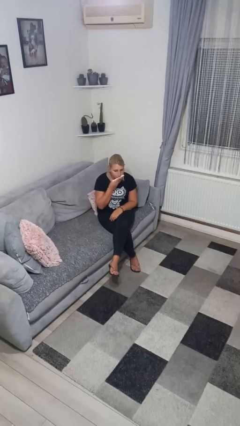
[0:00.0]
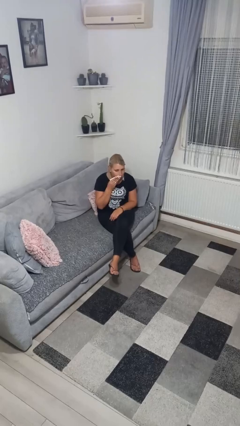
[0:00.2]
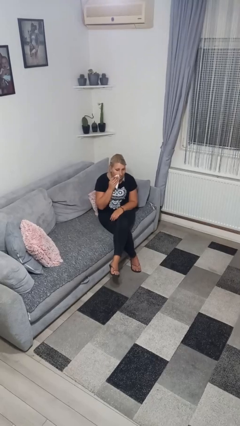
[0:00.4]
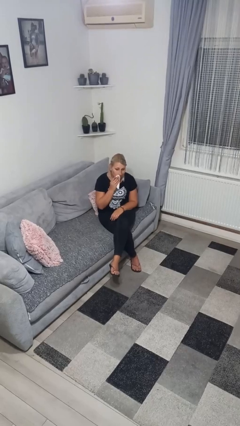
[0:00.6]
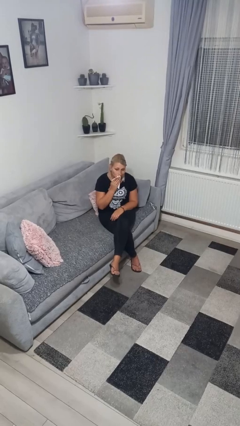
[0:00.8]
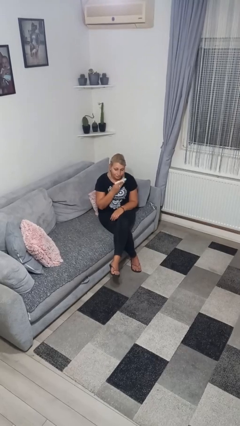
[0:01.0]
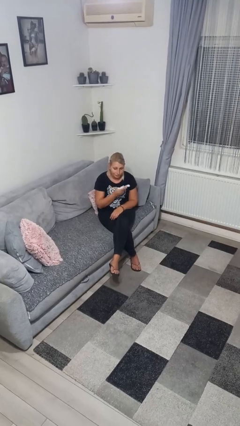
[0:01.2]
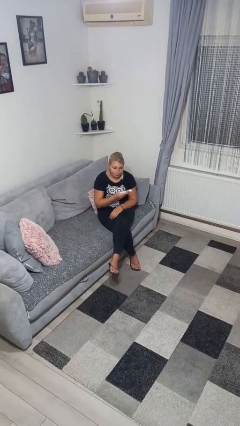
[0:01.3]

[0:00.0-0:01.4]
person wipes mouth with napkin

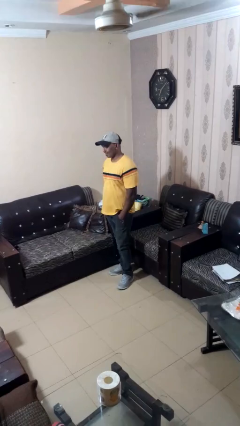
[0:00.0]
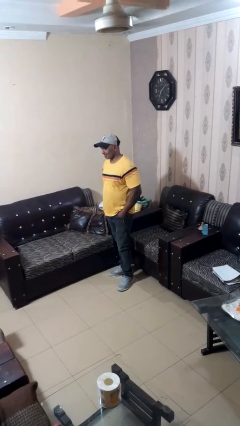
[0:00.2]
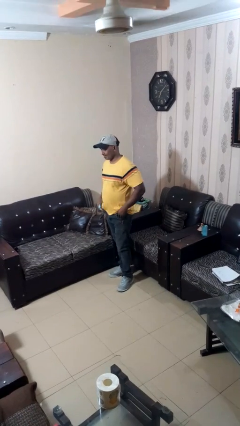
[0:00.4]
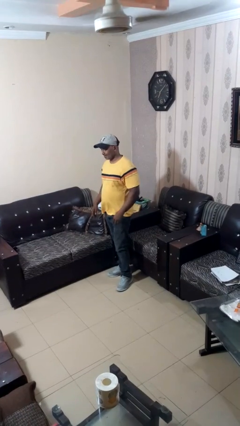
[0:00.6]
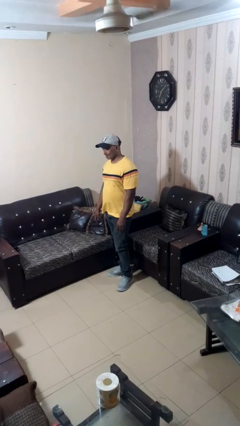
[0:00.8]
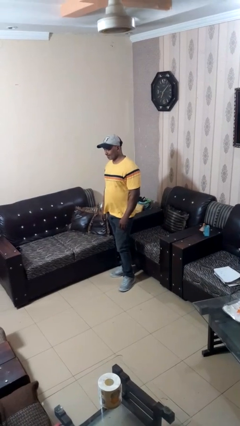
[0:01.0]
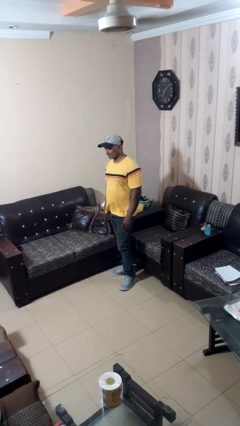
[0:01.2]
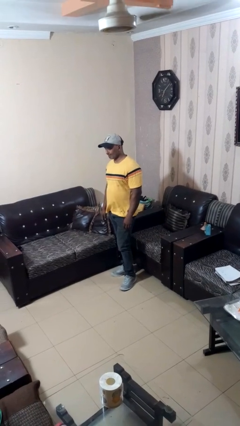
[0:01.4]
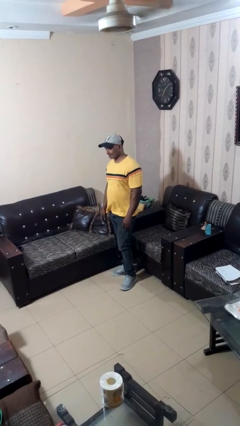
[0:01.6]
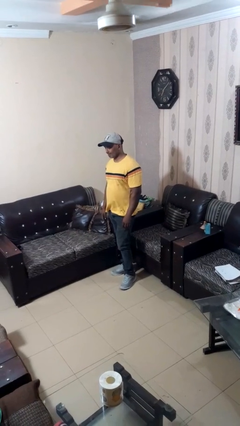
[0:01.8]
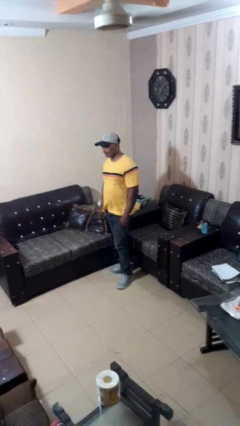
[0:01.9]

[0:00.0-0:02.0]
person puts hands in back pockets

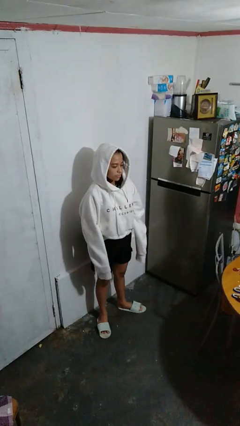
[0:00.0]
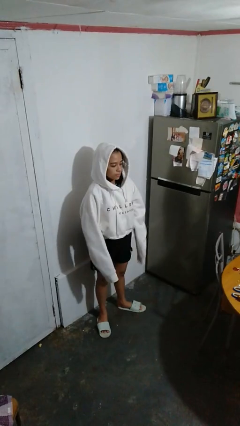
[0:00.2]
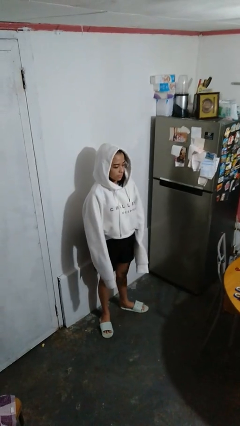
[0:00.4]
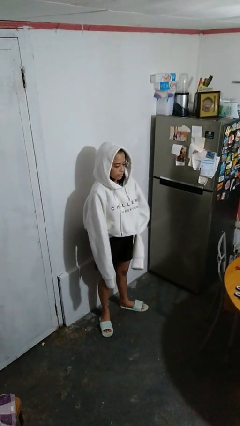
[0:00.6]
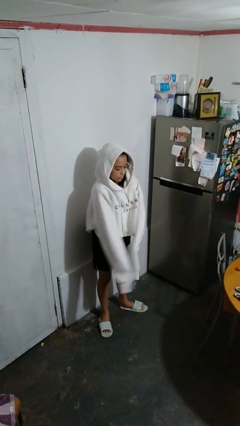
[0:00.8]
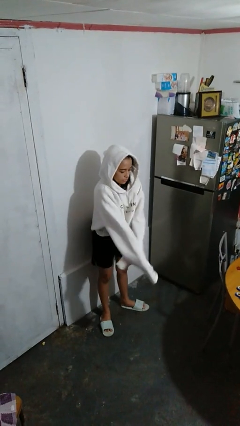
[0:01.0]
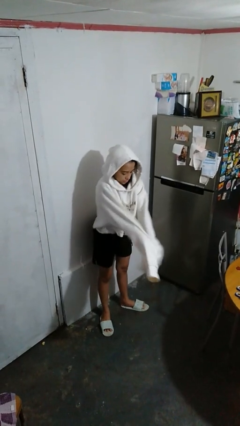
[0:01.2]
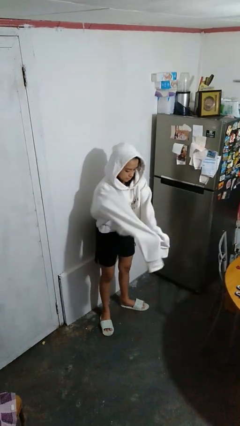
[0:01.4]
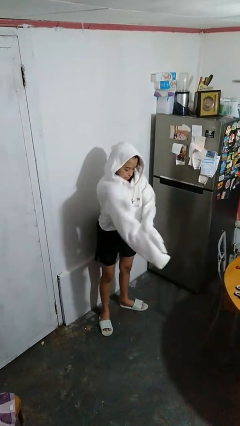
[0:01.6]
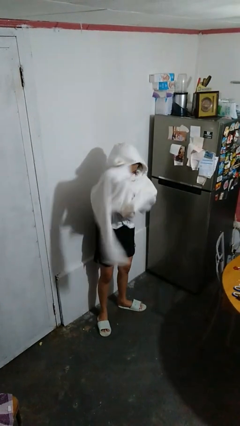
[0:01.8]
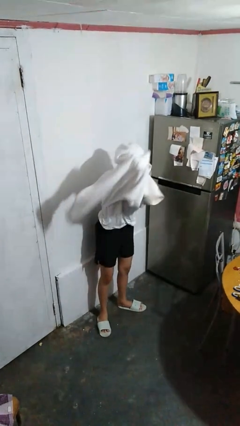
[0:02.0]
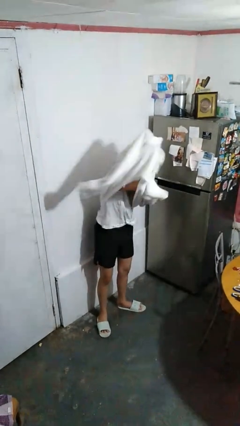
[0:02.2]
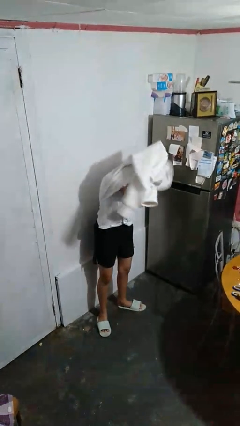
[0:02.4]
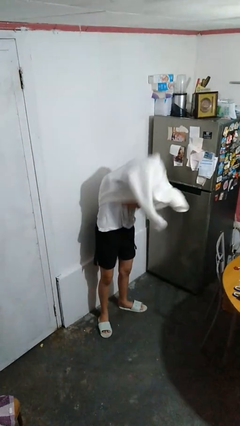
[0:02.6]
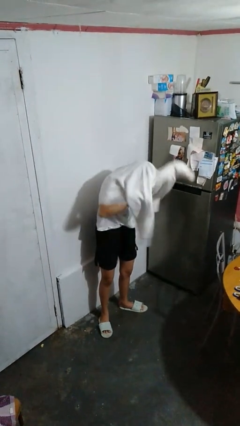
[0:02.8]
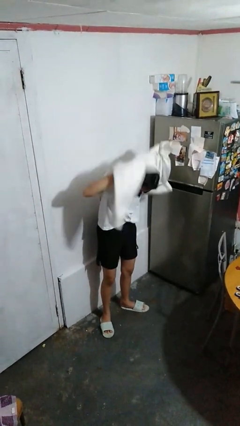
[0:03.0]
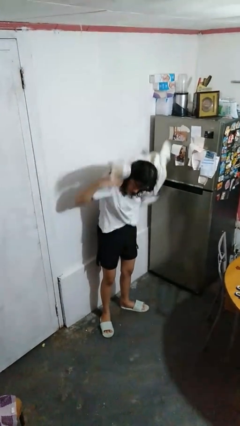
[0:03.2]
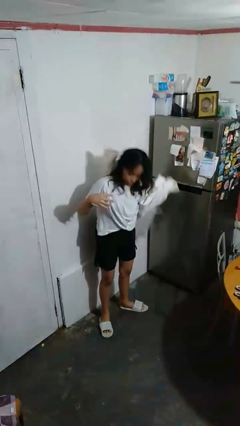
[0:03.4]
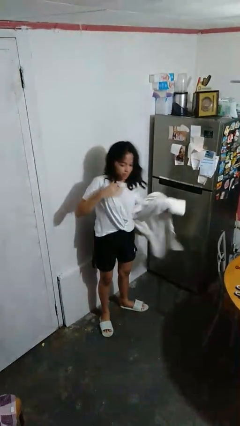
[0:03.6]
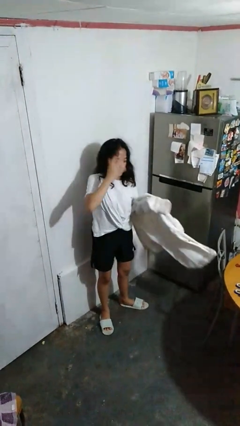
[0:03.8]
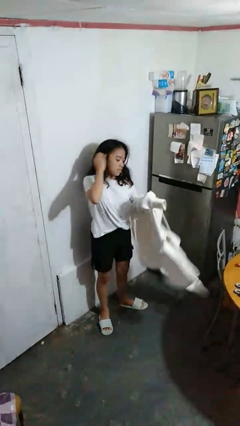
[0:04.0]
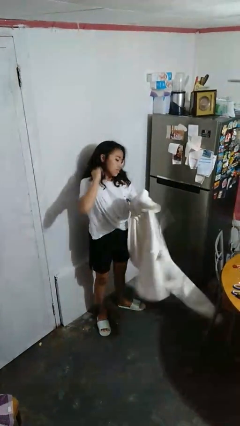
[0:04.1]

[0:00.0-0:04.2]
person takes off hoodie

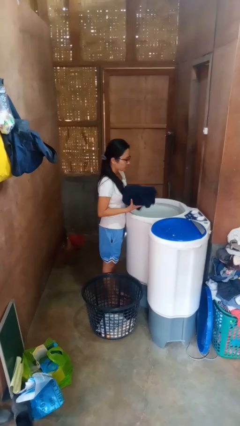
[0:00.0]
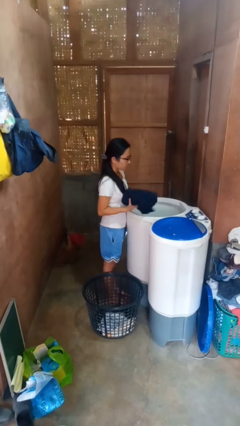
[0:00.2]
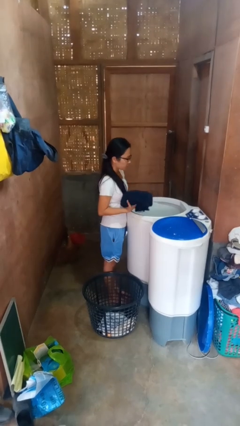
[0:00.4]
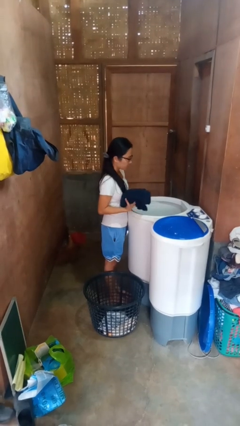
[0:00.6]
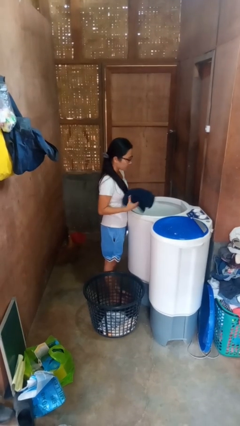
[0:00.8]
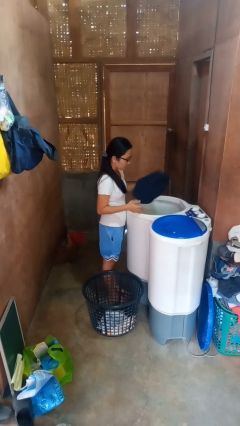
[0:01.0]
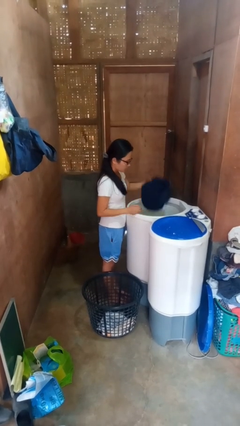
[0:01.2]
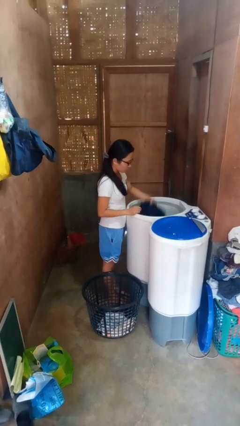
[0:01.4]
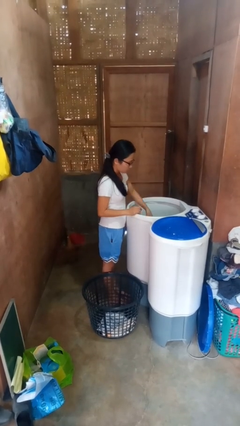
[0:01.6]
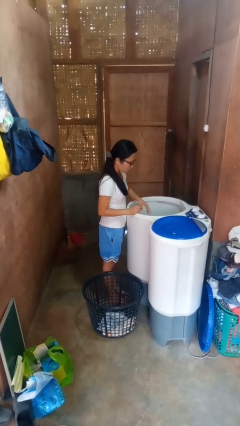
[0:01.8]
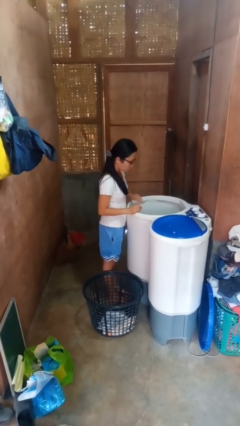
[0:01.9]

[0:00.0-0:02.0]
person loads clotheswasher

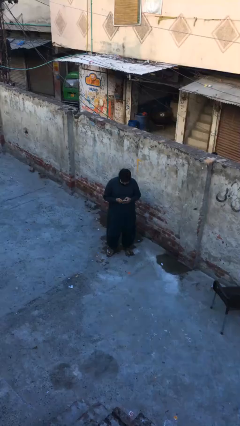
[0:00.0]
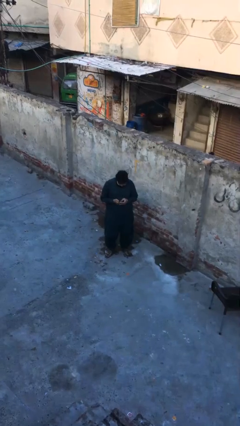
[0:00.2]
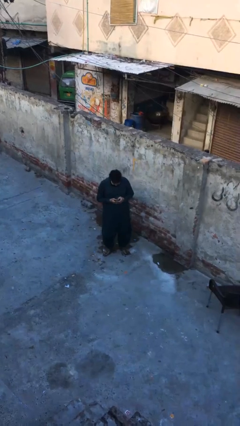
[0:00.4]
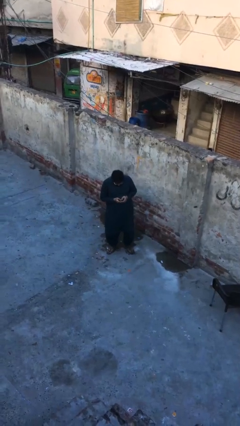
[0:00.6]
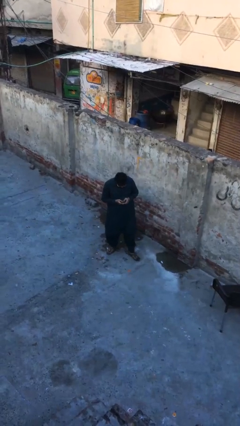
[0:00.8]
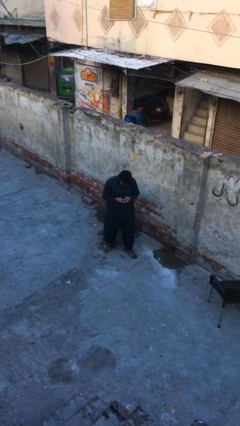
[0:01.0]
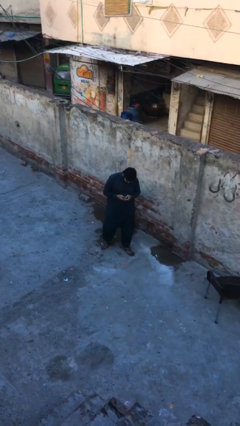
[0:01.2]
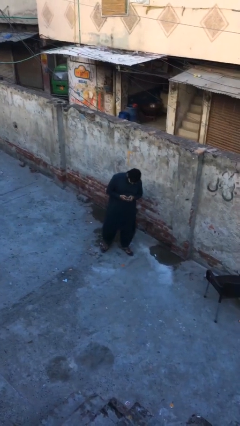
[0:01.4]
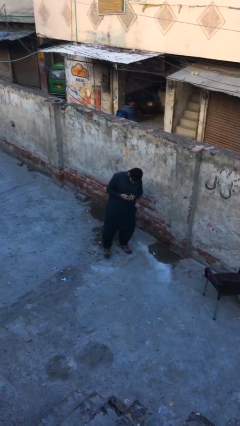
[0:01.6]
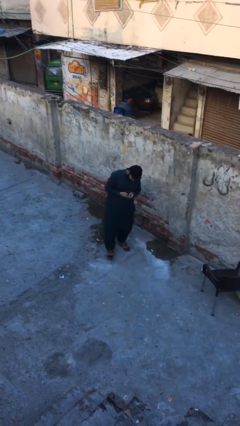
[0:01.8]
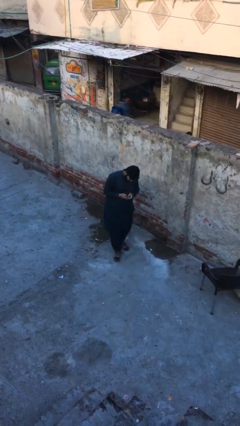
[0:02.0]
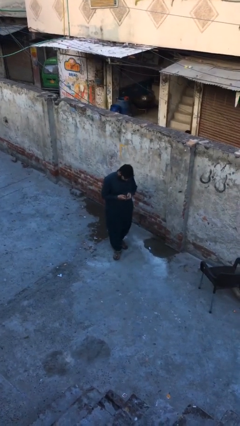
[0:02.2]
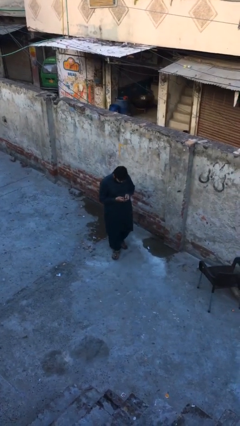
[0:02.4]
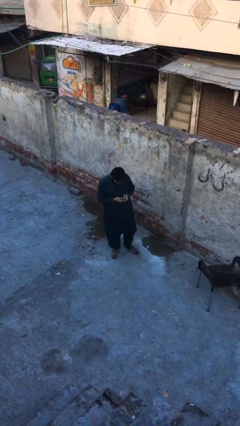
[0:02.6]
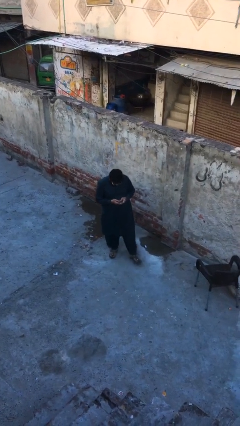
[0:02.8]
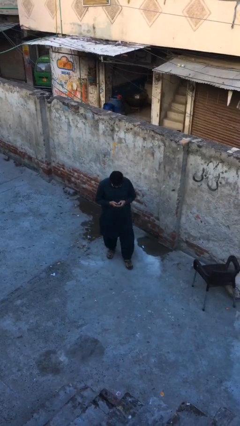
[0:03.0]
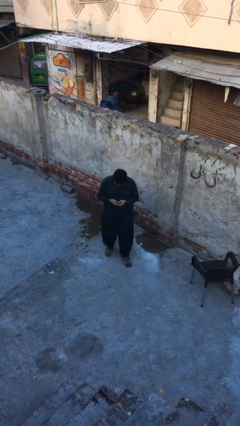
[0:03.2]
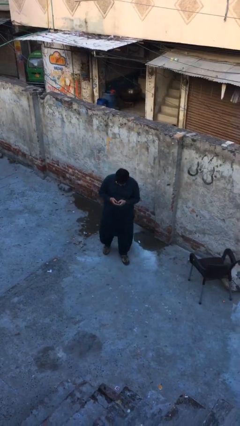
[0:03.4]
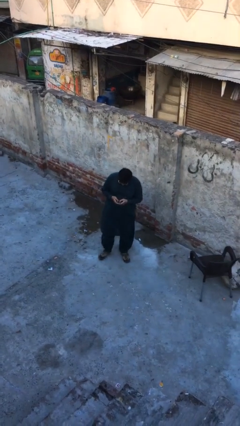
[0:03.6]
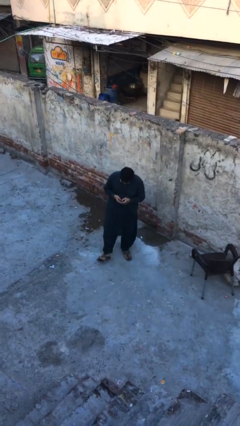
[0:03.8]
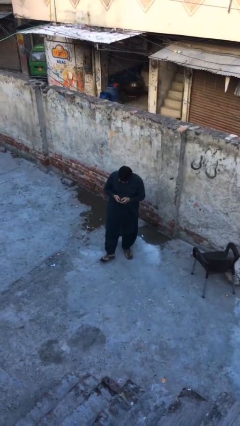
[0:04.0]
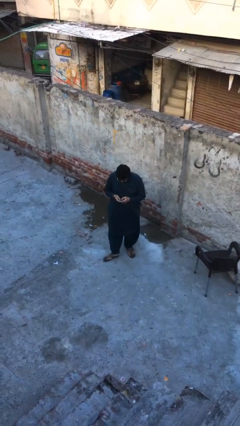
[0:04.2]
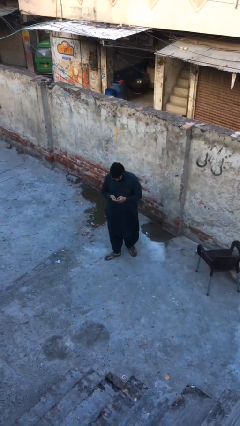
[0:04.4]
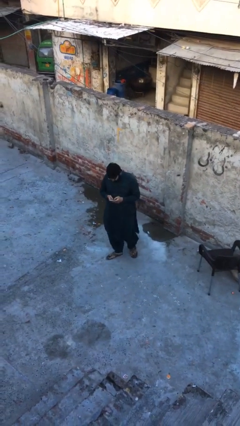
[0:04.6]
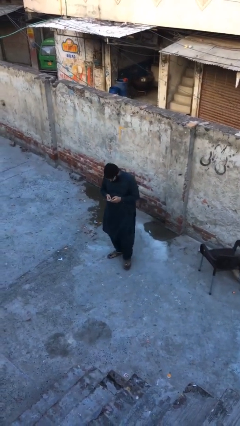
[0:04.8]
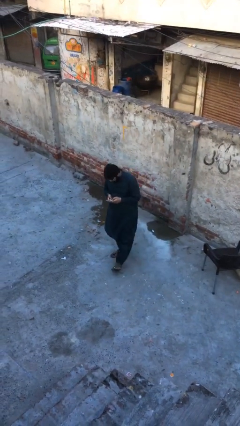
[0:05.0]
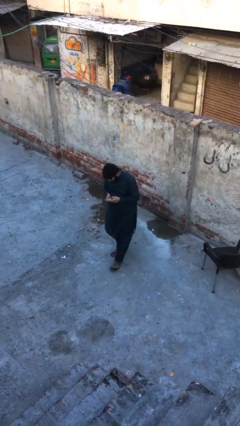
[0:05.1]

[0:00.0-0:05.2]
person texts on phone

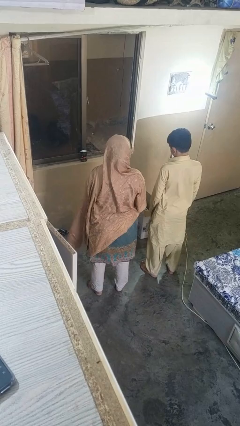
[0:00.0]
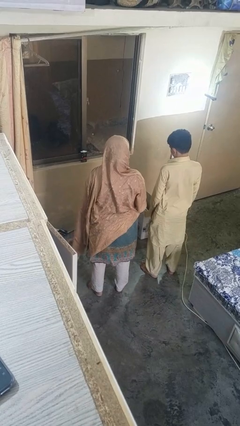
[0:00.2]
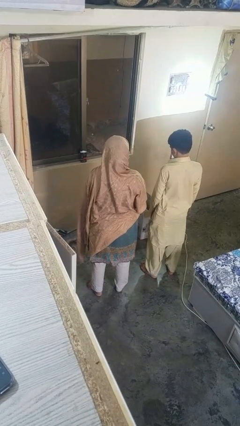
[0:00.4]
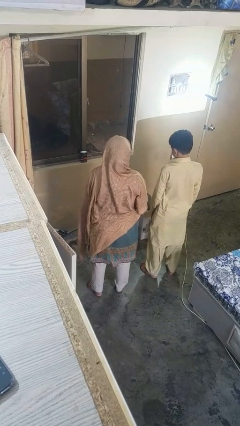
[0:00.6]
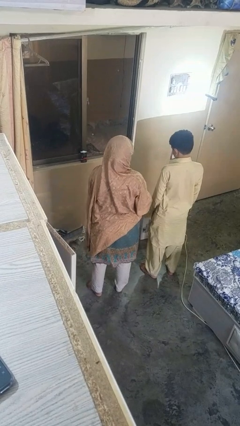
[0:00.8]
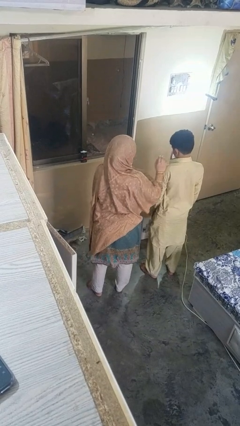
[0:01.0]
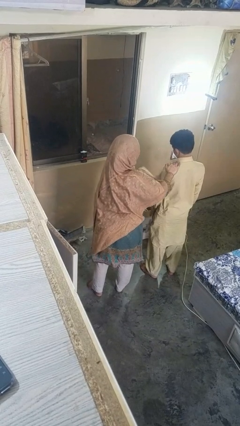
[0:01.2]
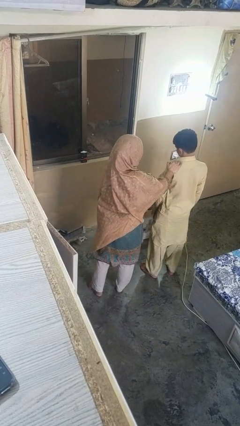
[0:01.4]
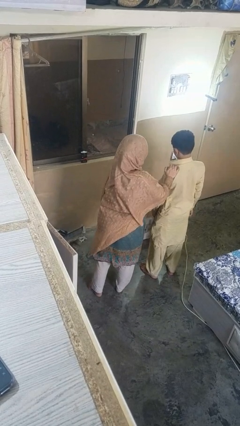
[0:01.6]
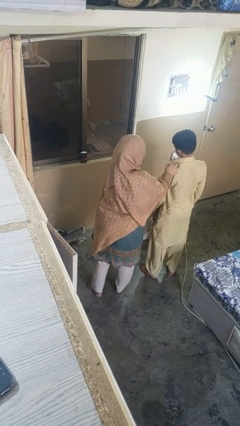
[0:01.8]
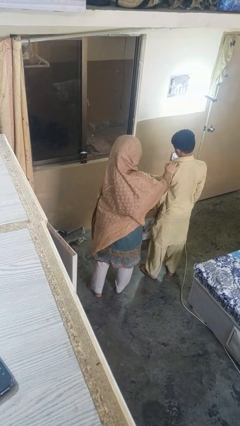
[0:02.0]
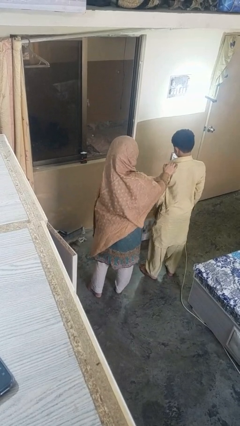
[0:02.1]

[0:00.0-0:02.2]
person shoves person

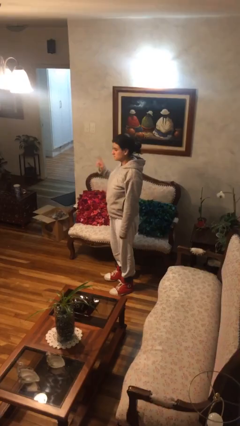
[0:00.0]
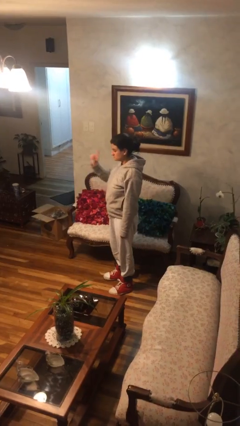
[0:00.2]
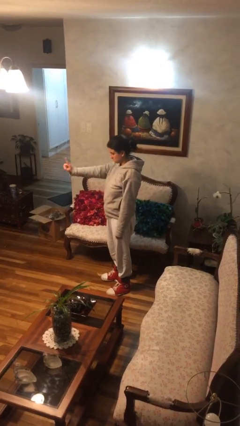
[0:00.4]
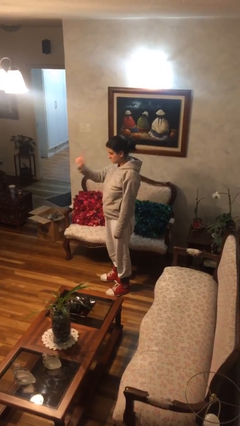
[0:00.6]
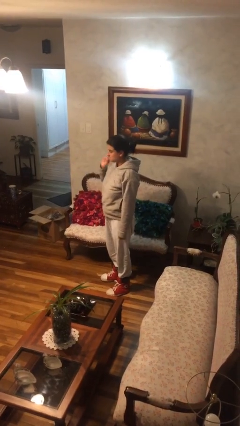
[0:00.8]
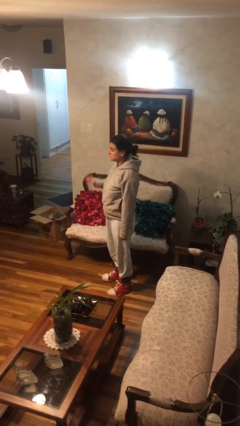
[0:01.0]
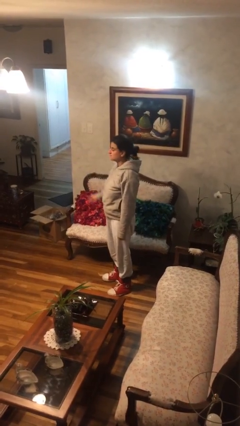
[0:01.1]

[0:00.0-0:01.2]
person gestures number one
